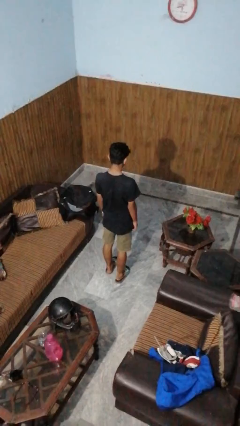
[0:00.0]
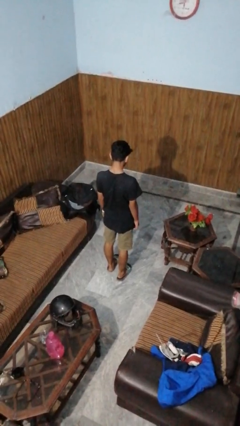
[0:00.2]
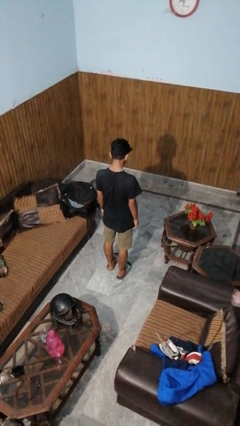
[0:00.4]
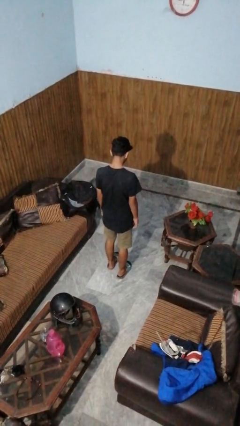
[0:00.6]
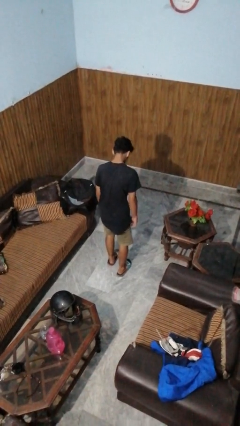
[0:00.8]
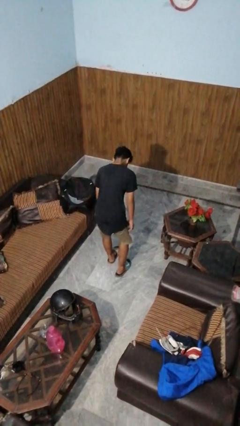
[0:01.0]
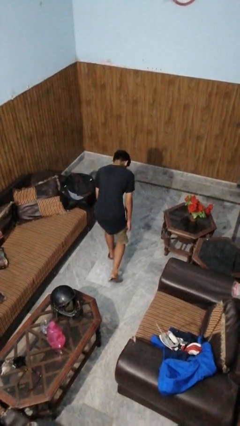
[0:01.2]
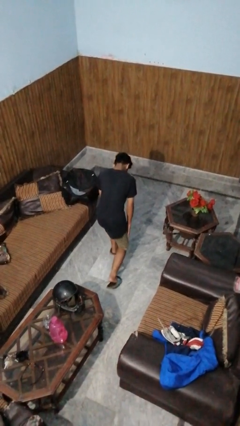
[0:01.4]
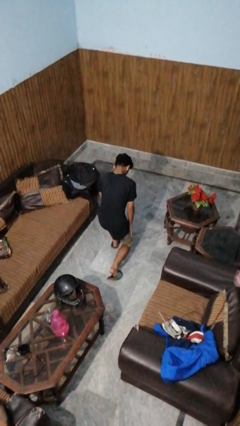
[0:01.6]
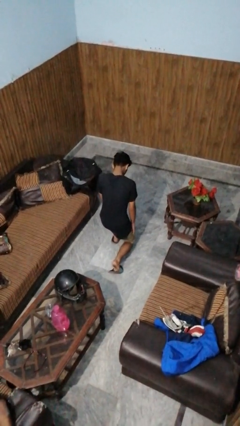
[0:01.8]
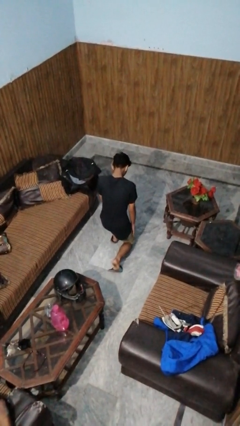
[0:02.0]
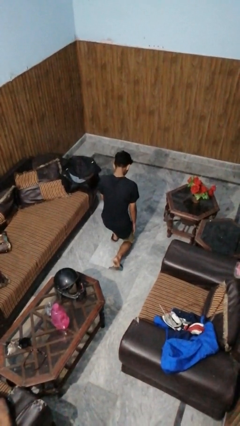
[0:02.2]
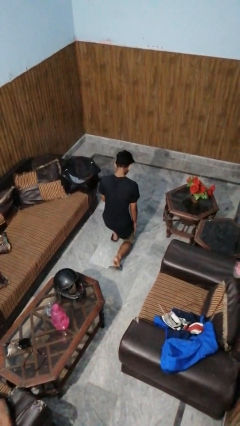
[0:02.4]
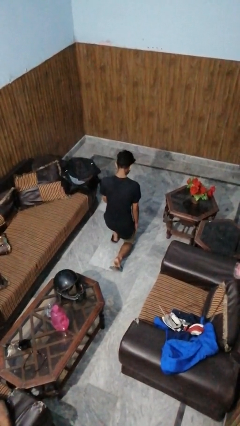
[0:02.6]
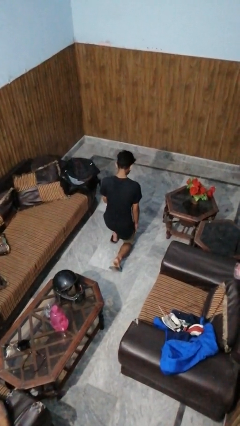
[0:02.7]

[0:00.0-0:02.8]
person kneels

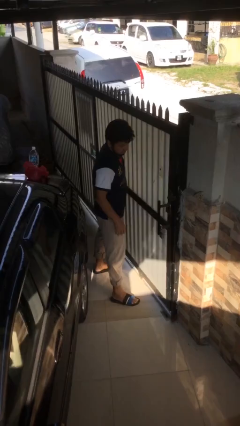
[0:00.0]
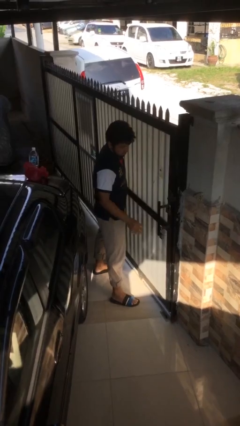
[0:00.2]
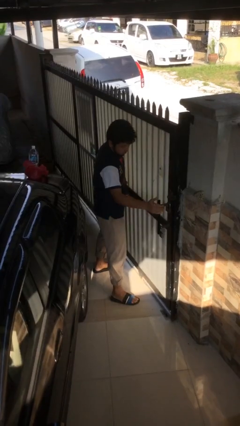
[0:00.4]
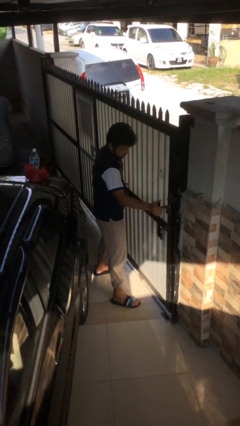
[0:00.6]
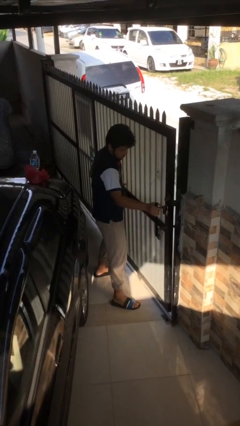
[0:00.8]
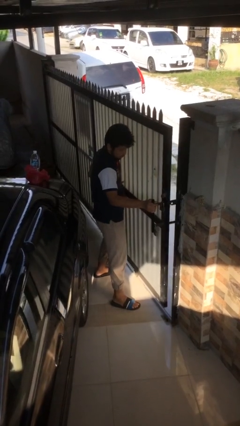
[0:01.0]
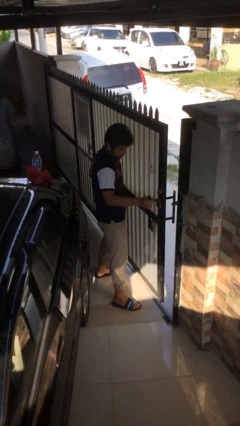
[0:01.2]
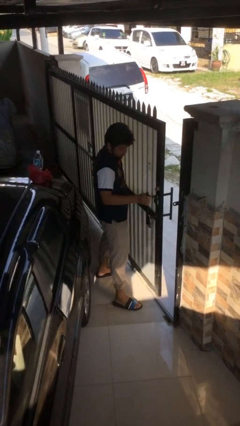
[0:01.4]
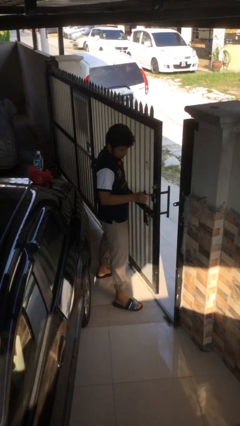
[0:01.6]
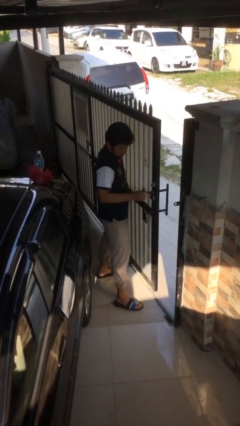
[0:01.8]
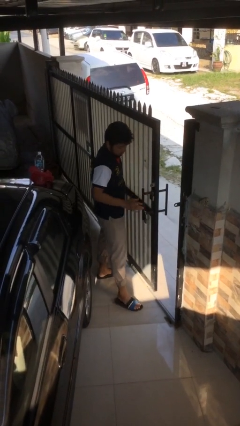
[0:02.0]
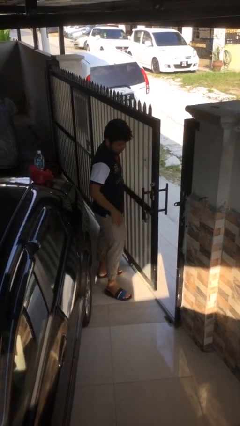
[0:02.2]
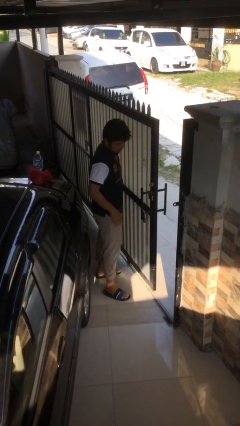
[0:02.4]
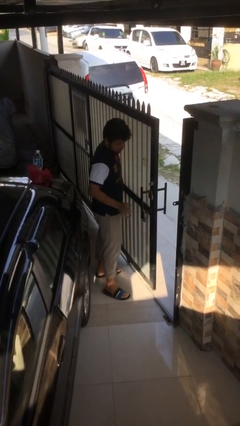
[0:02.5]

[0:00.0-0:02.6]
person opens sliding door

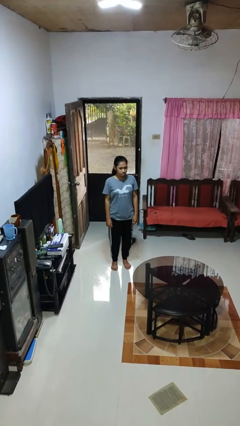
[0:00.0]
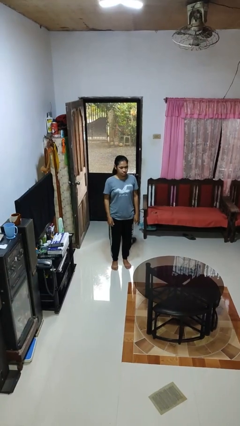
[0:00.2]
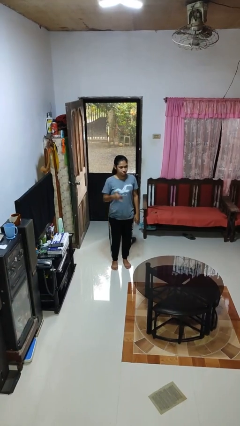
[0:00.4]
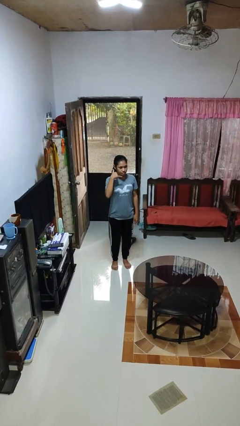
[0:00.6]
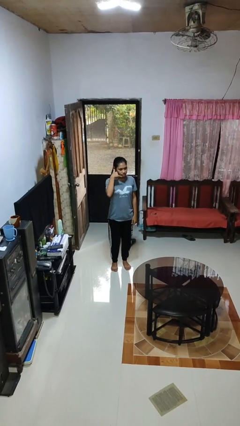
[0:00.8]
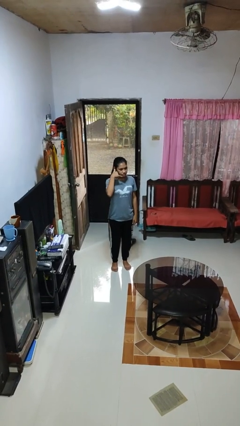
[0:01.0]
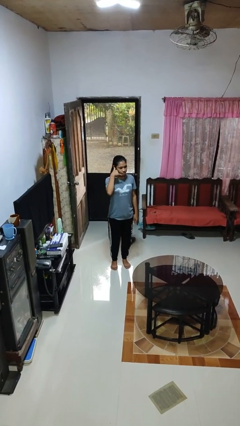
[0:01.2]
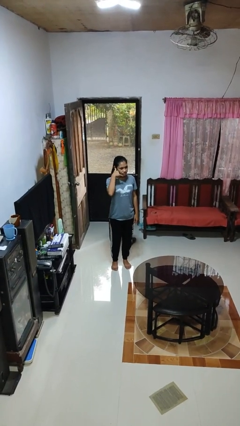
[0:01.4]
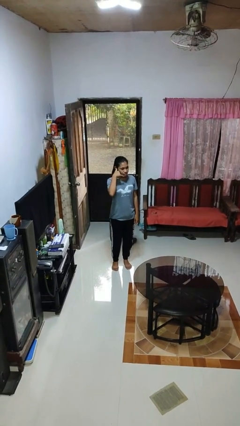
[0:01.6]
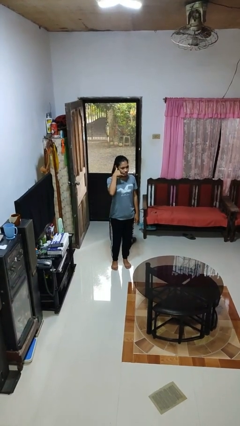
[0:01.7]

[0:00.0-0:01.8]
person gestures call me

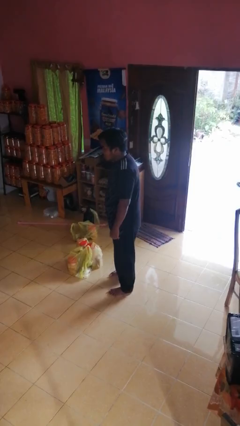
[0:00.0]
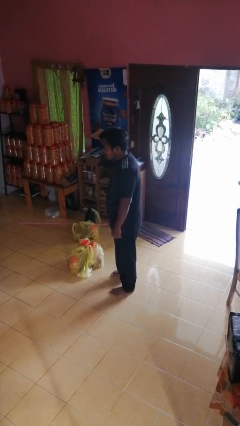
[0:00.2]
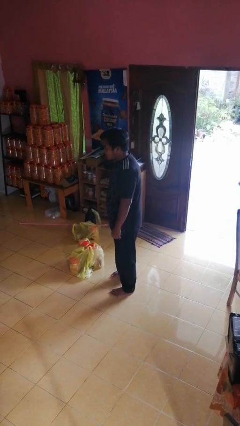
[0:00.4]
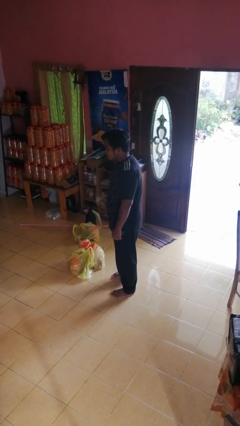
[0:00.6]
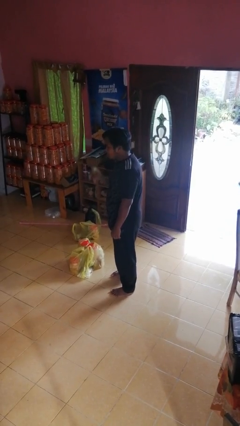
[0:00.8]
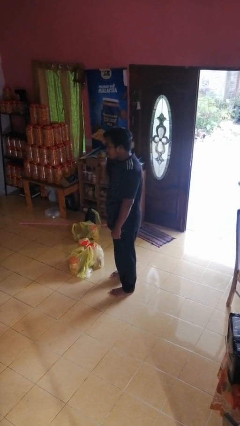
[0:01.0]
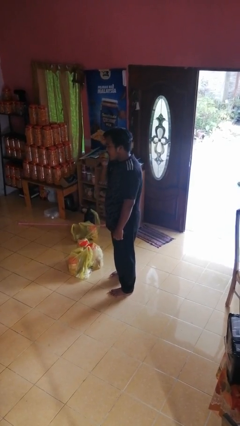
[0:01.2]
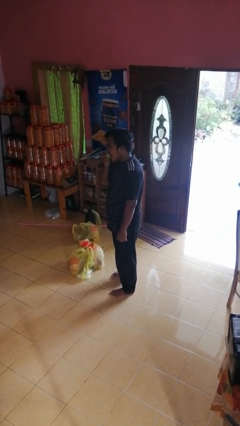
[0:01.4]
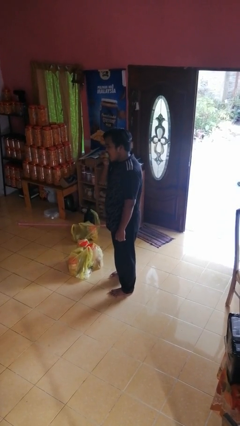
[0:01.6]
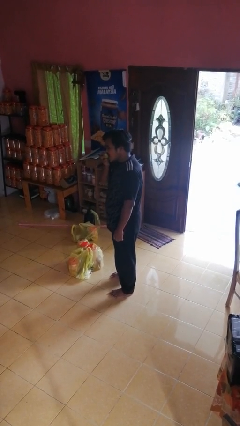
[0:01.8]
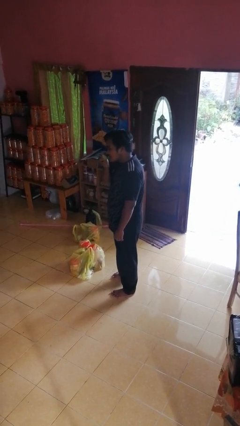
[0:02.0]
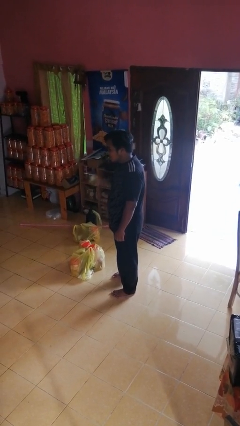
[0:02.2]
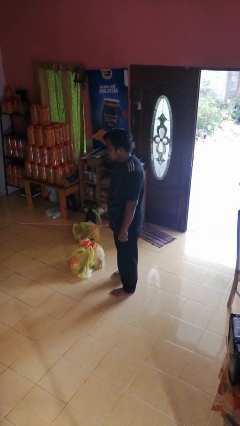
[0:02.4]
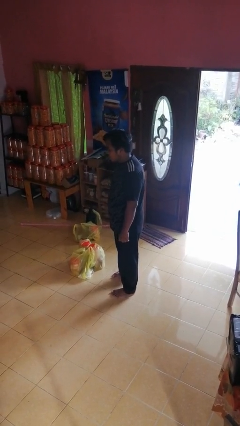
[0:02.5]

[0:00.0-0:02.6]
person eats apple

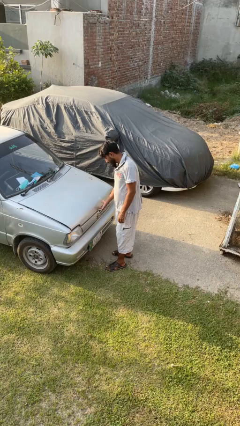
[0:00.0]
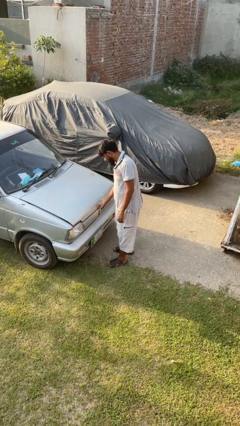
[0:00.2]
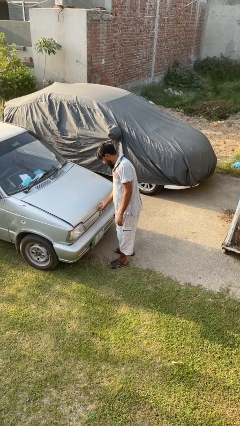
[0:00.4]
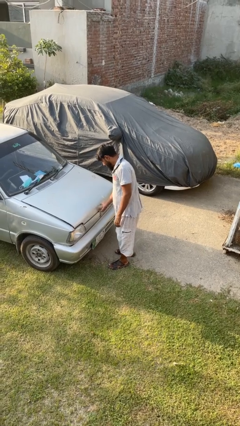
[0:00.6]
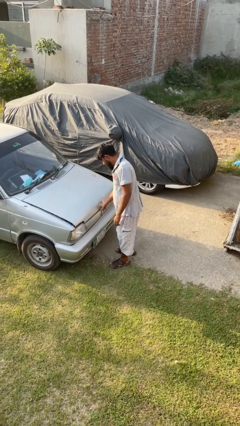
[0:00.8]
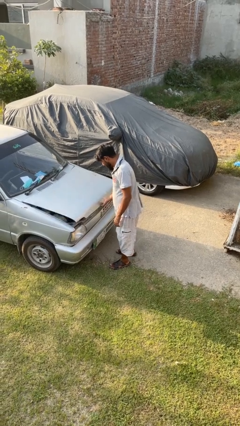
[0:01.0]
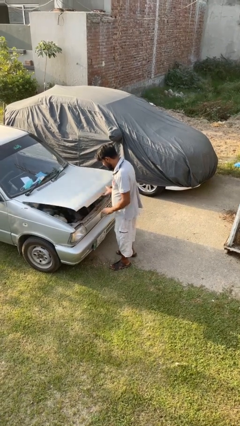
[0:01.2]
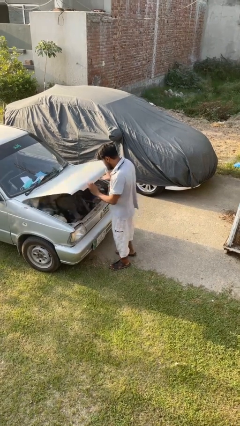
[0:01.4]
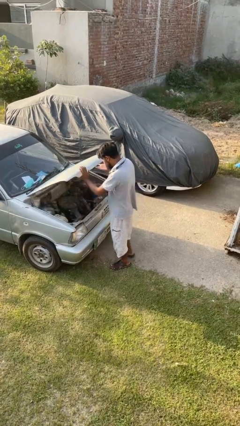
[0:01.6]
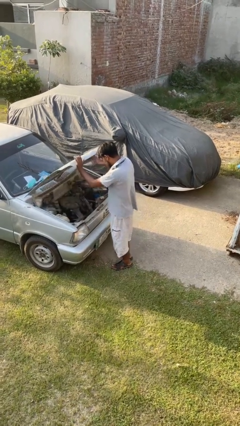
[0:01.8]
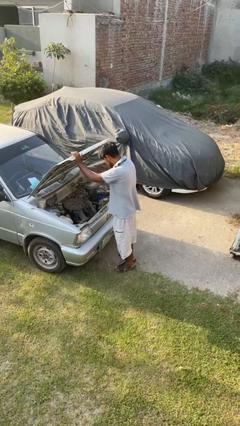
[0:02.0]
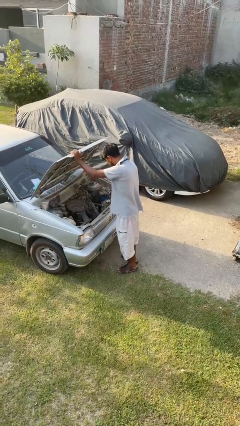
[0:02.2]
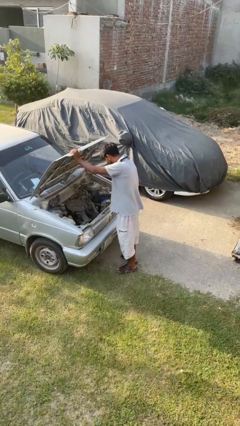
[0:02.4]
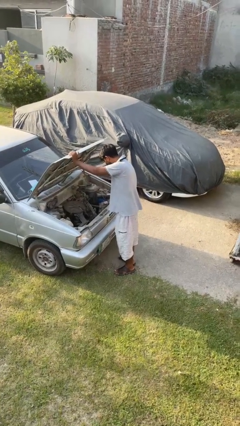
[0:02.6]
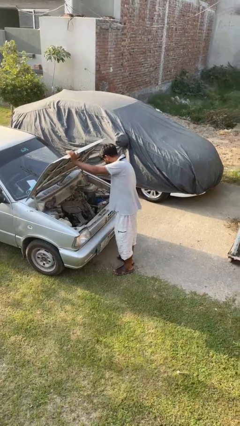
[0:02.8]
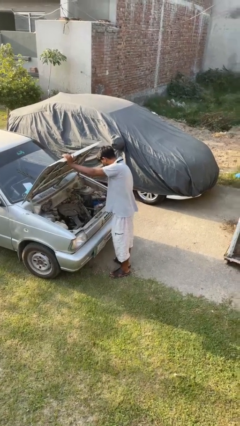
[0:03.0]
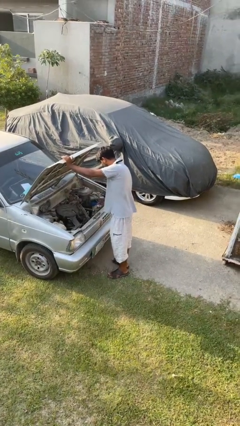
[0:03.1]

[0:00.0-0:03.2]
person opens car hood

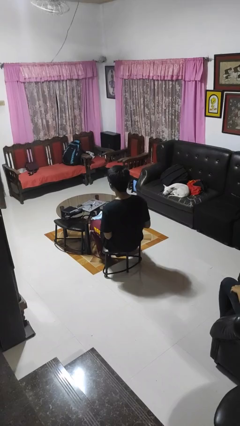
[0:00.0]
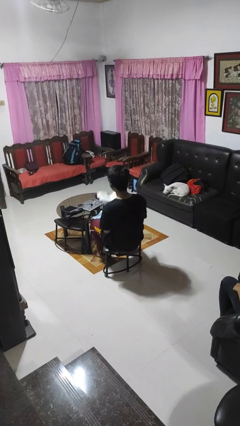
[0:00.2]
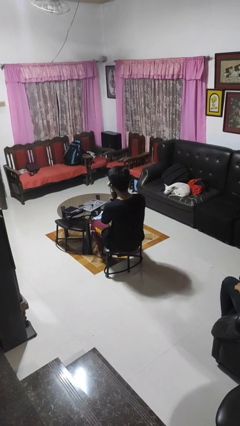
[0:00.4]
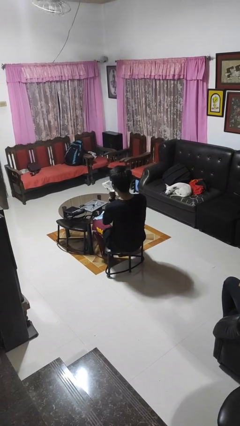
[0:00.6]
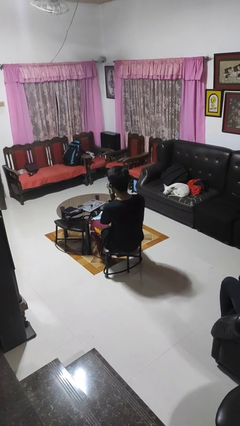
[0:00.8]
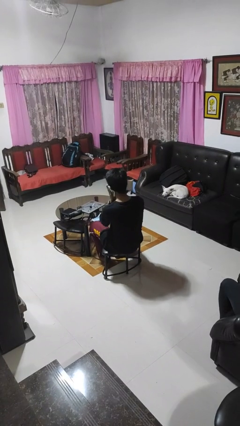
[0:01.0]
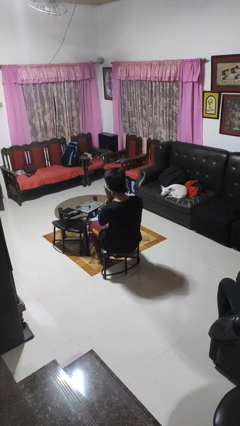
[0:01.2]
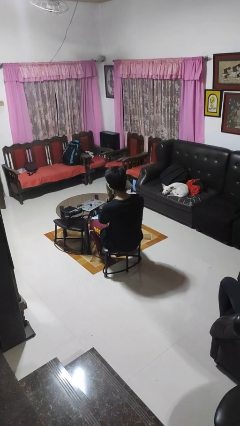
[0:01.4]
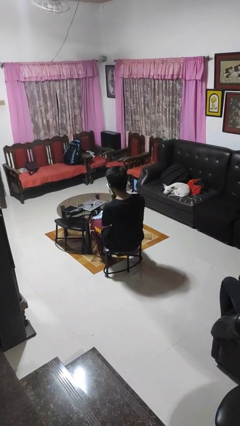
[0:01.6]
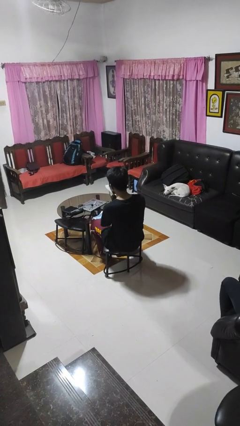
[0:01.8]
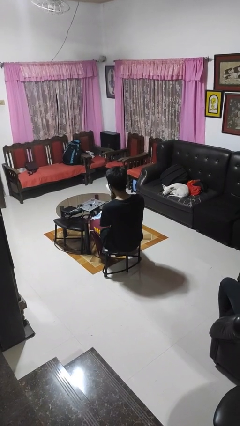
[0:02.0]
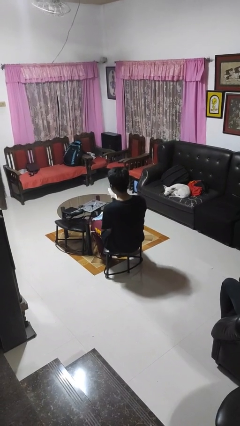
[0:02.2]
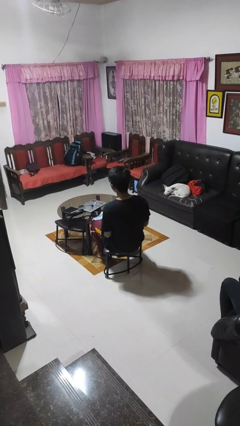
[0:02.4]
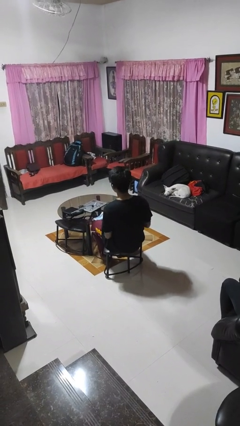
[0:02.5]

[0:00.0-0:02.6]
person wipes mouth with napkin

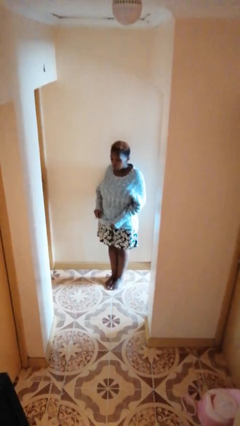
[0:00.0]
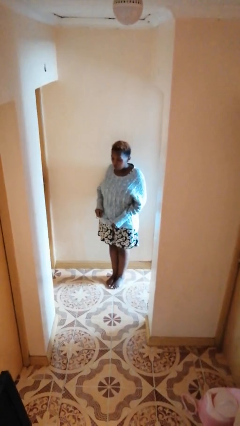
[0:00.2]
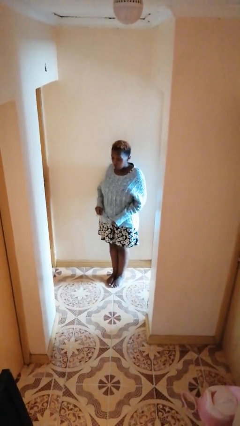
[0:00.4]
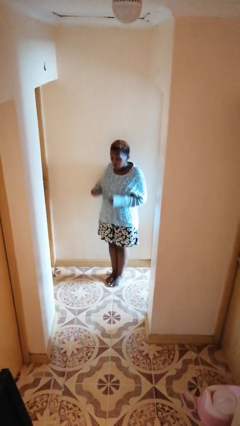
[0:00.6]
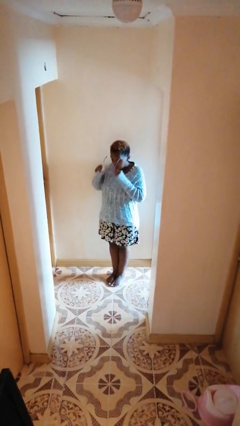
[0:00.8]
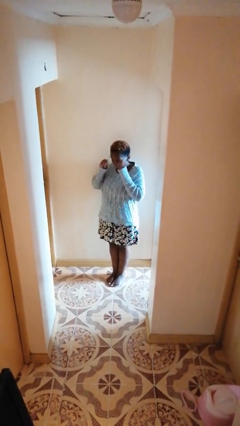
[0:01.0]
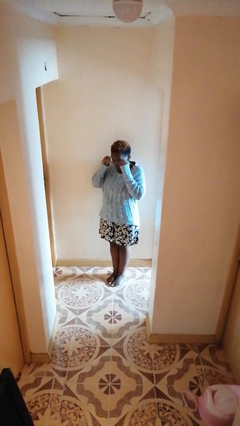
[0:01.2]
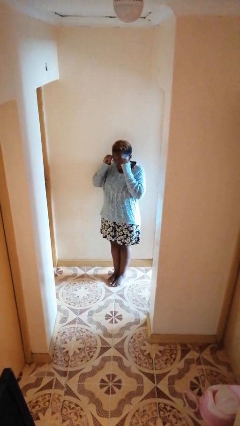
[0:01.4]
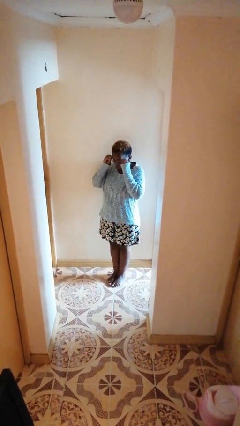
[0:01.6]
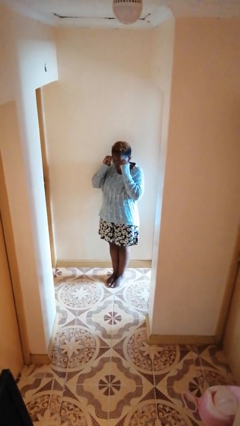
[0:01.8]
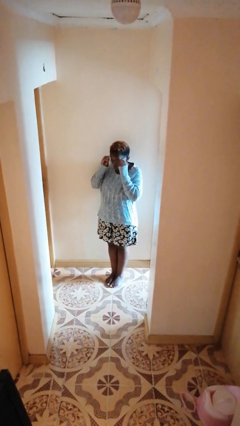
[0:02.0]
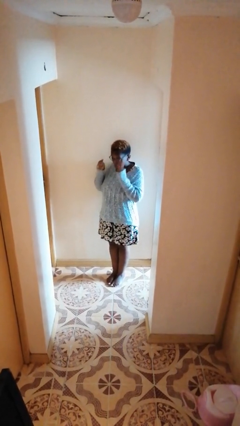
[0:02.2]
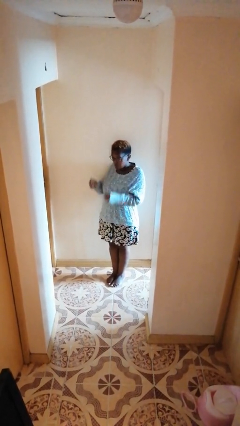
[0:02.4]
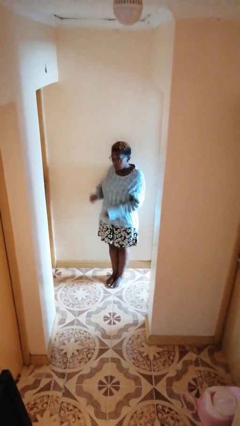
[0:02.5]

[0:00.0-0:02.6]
person puts on glasses
